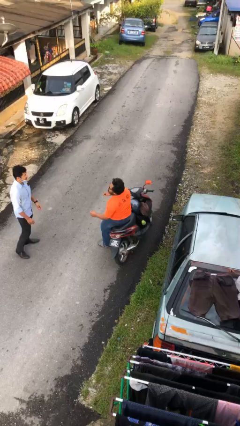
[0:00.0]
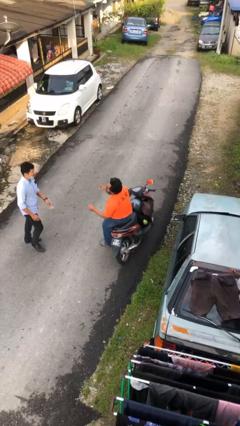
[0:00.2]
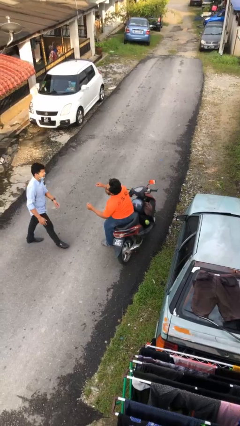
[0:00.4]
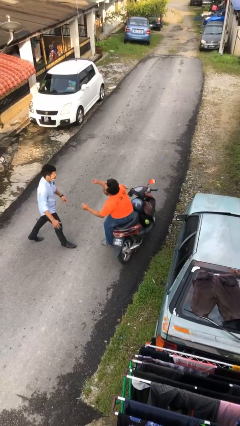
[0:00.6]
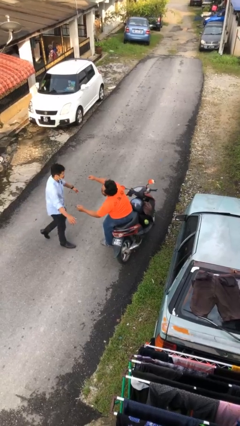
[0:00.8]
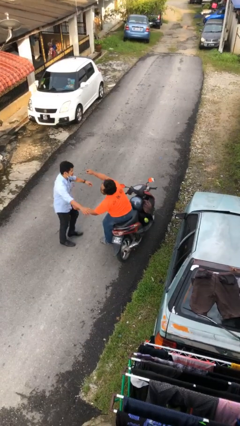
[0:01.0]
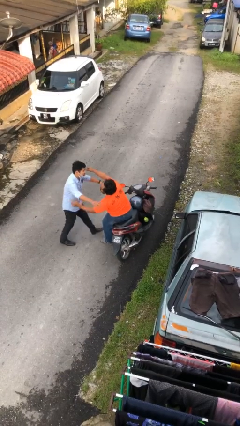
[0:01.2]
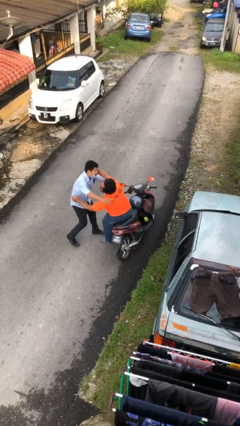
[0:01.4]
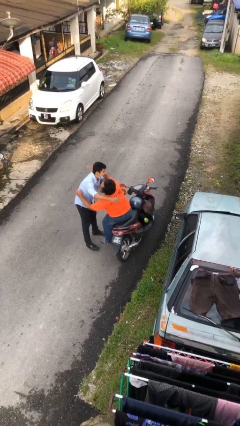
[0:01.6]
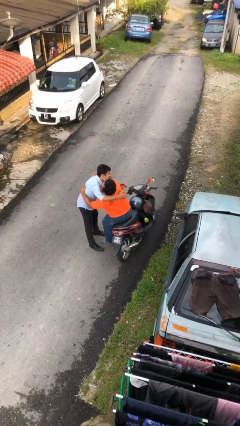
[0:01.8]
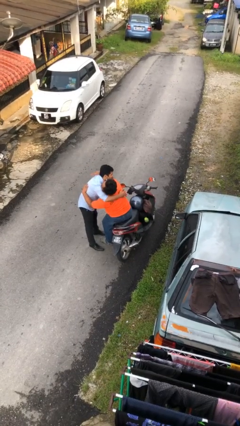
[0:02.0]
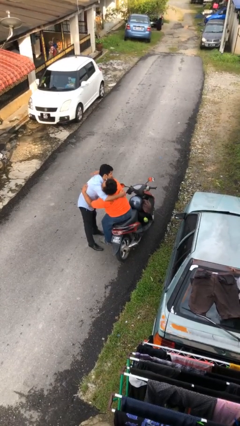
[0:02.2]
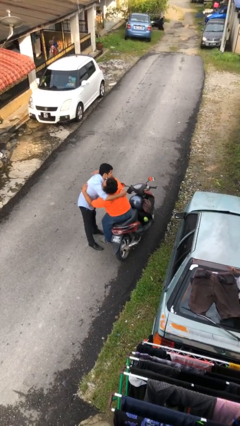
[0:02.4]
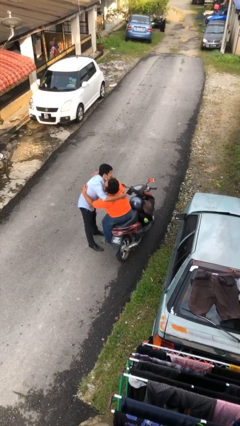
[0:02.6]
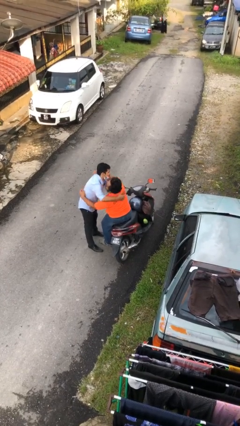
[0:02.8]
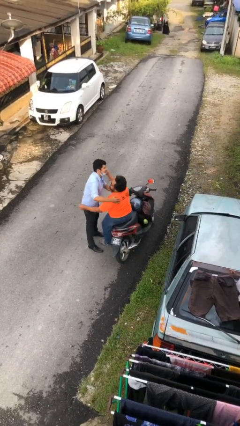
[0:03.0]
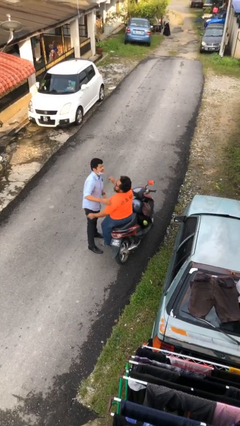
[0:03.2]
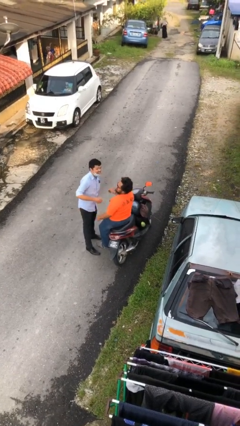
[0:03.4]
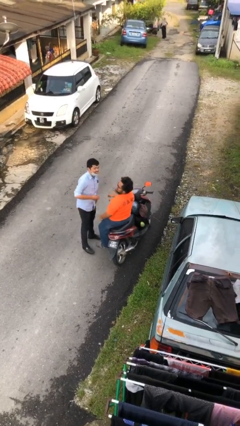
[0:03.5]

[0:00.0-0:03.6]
person embraces person

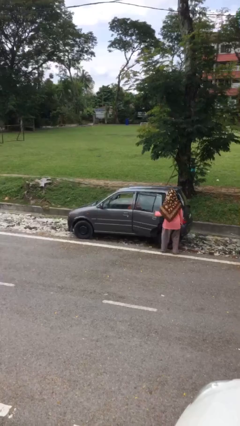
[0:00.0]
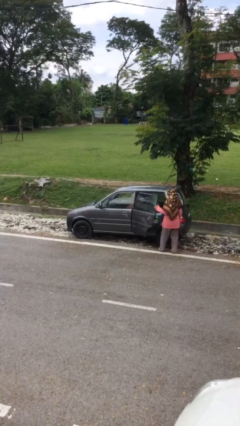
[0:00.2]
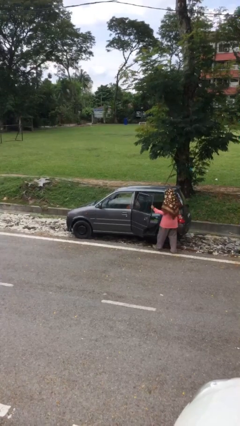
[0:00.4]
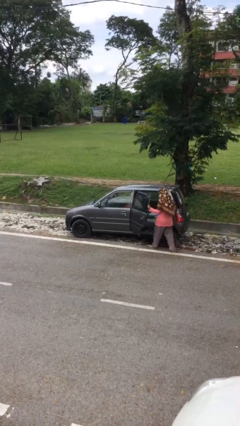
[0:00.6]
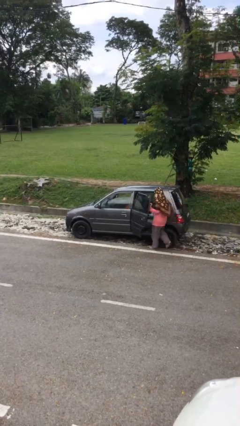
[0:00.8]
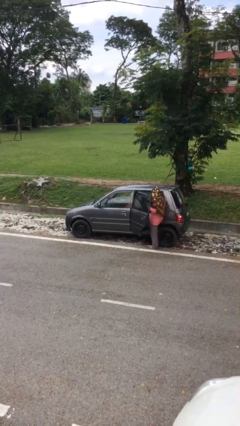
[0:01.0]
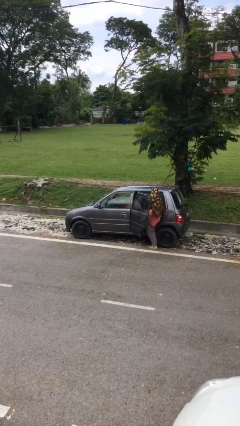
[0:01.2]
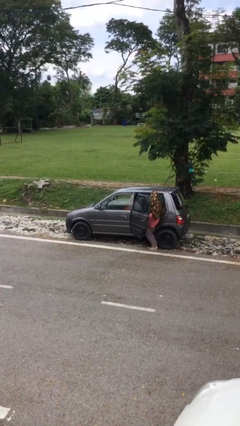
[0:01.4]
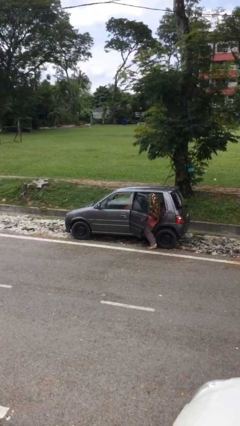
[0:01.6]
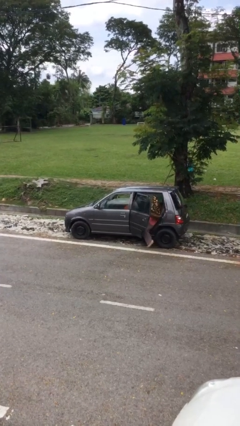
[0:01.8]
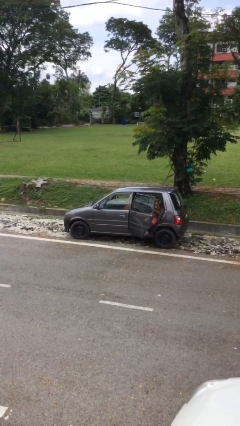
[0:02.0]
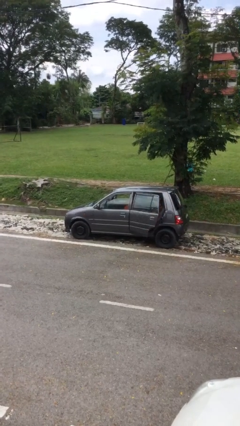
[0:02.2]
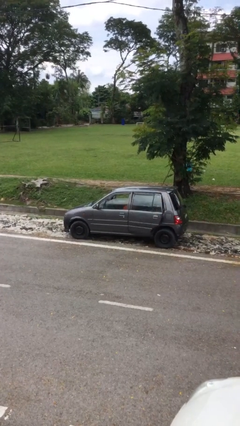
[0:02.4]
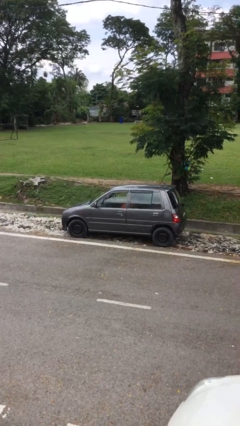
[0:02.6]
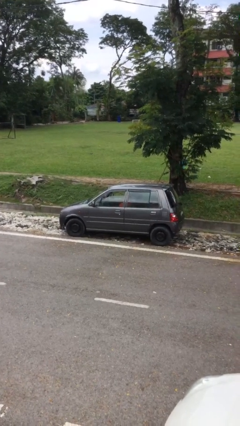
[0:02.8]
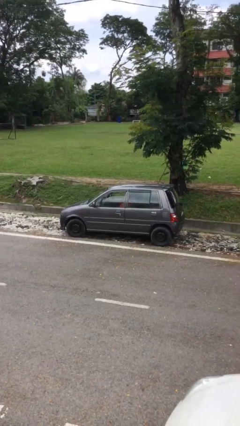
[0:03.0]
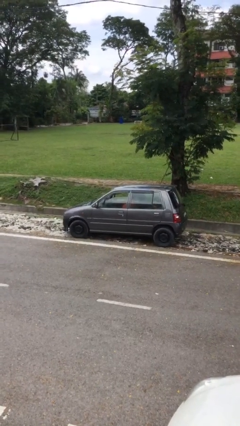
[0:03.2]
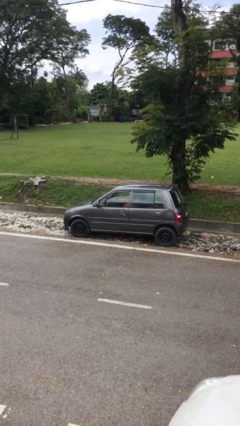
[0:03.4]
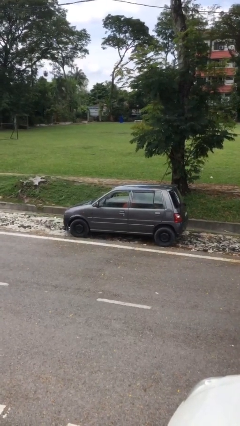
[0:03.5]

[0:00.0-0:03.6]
car picks up person

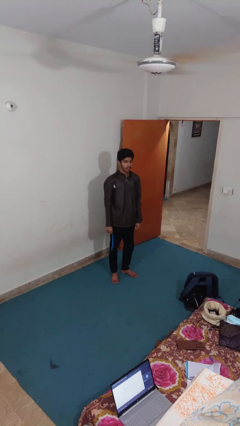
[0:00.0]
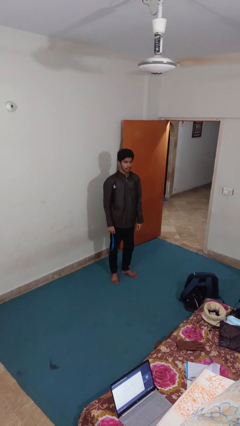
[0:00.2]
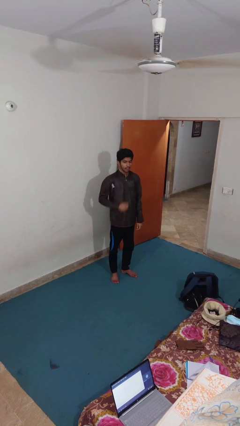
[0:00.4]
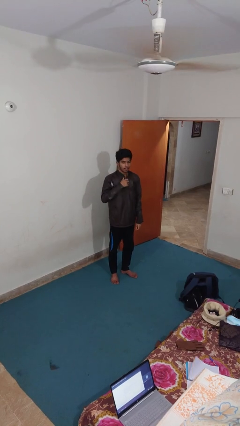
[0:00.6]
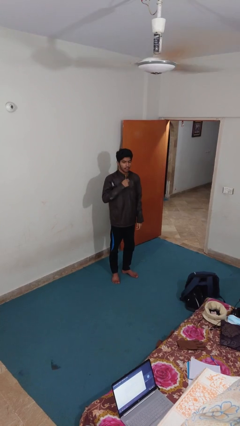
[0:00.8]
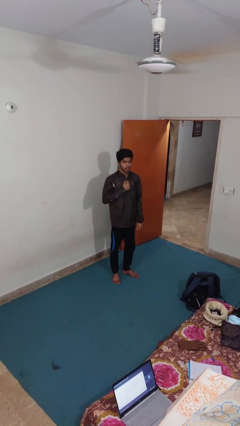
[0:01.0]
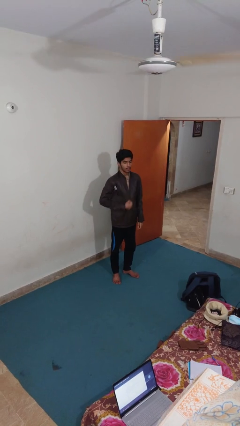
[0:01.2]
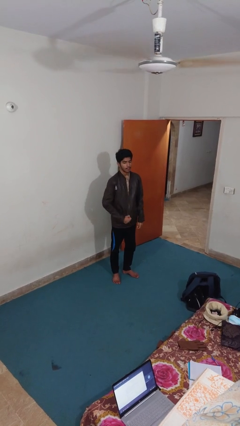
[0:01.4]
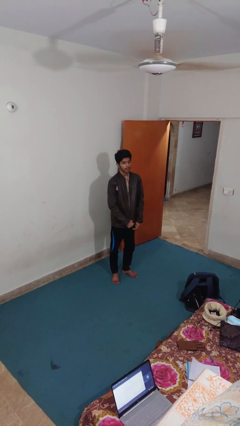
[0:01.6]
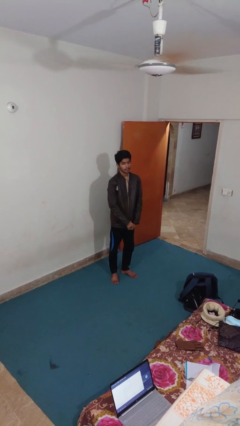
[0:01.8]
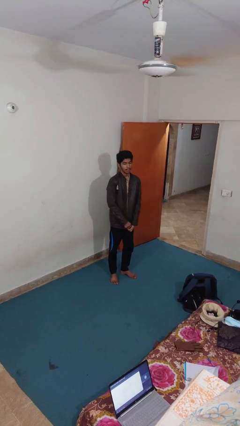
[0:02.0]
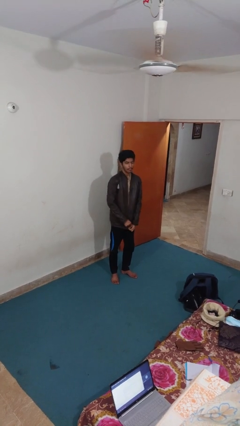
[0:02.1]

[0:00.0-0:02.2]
person unzips jacket

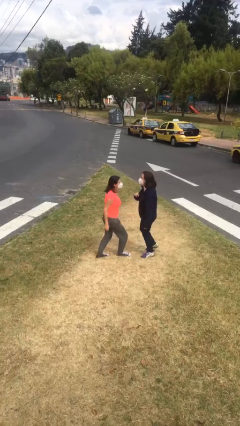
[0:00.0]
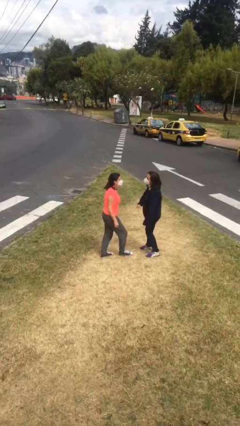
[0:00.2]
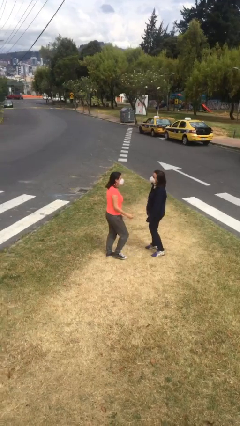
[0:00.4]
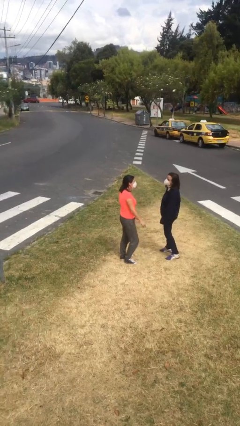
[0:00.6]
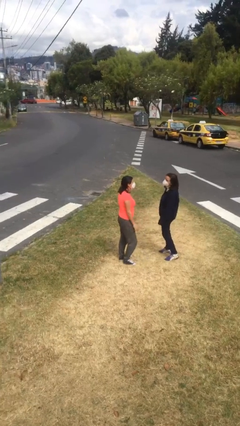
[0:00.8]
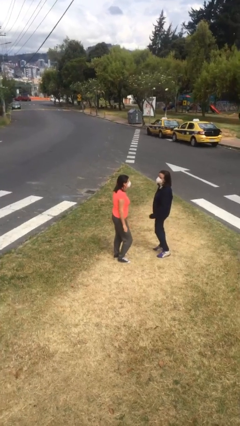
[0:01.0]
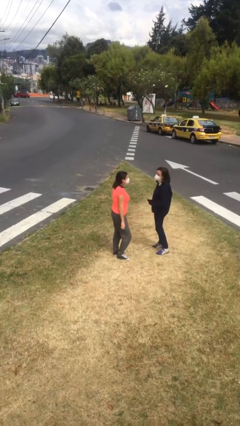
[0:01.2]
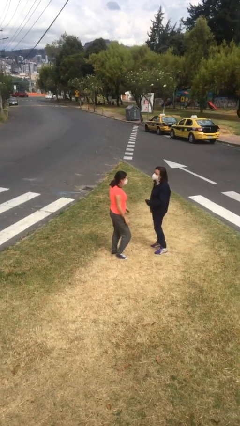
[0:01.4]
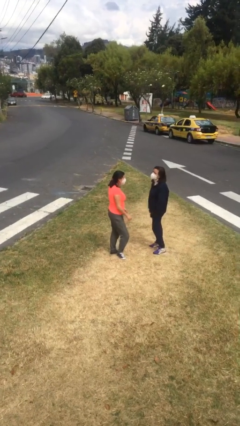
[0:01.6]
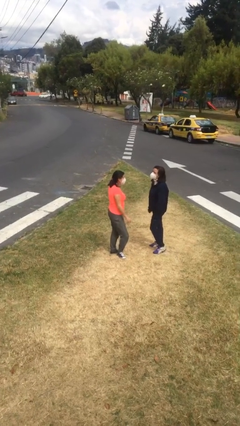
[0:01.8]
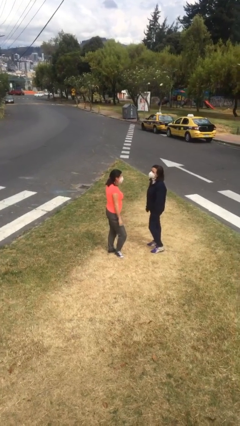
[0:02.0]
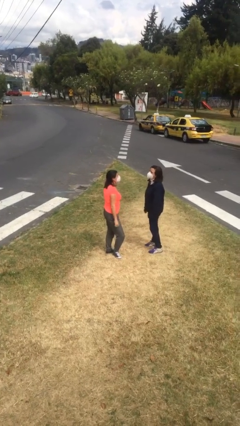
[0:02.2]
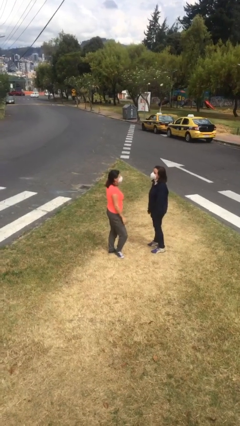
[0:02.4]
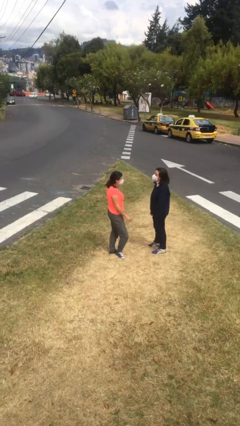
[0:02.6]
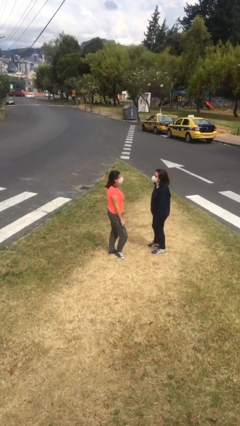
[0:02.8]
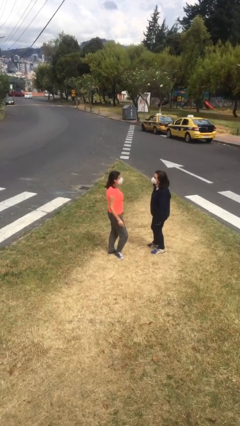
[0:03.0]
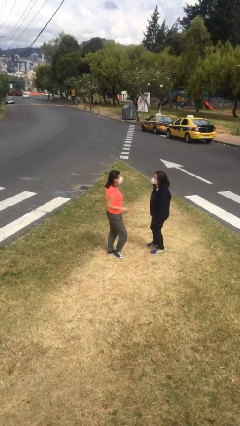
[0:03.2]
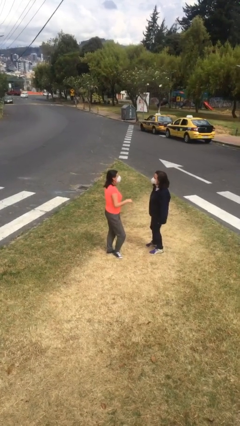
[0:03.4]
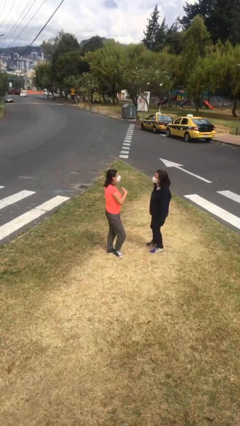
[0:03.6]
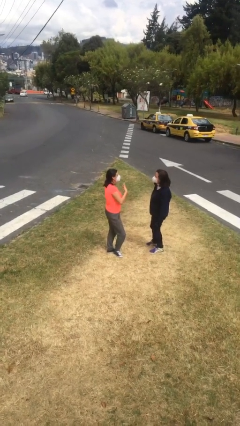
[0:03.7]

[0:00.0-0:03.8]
person talks to person

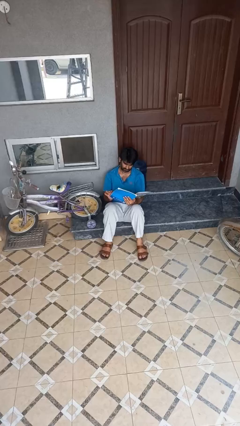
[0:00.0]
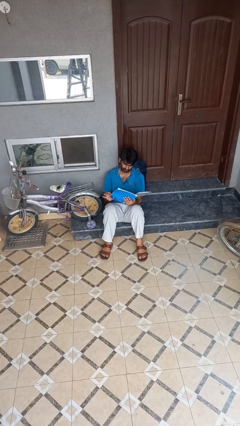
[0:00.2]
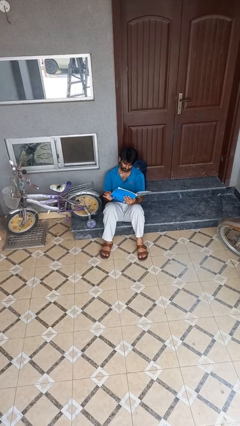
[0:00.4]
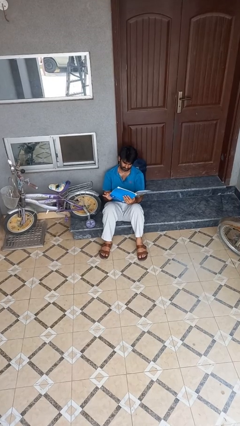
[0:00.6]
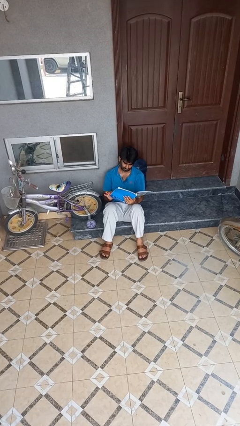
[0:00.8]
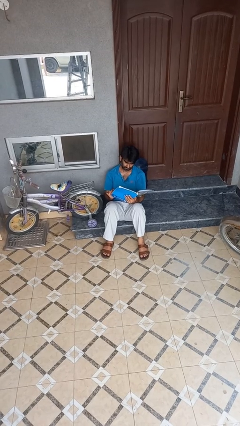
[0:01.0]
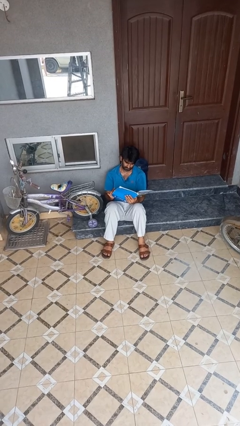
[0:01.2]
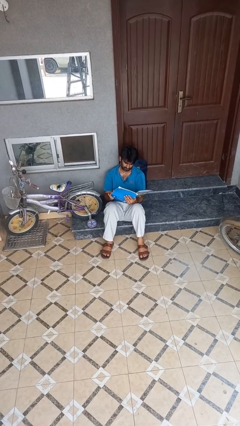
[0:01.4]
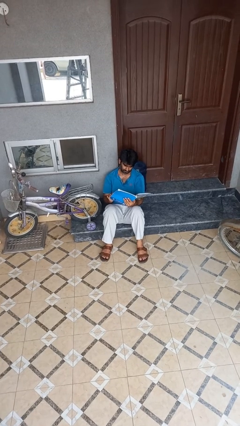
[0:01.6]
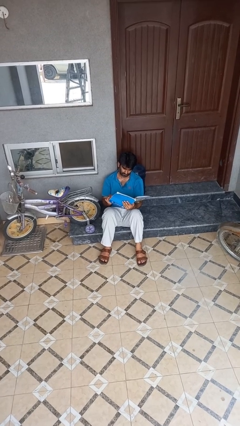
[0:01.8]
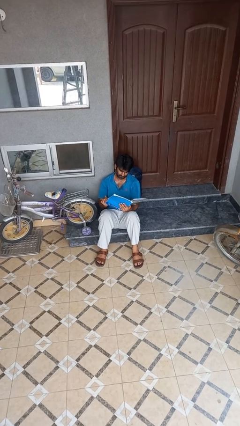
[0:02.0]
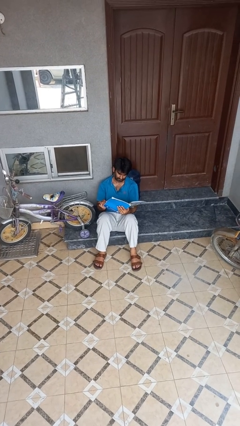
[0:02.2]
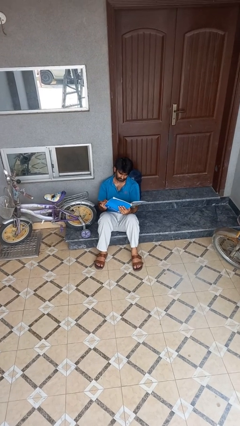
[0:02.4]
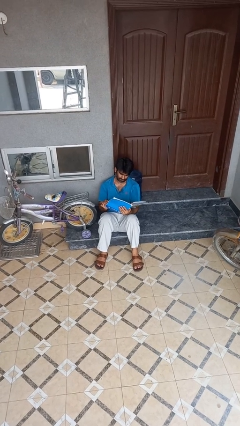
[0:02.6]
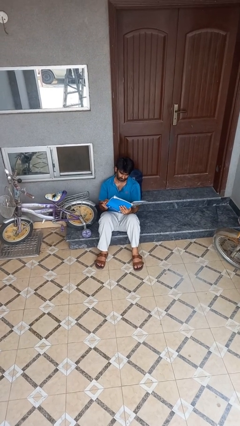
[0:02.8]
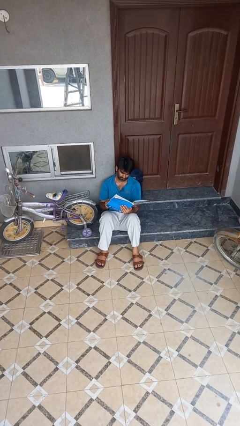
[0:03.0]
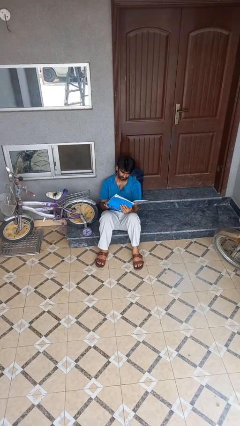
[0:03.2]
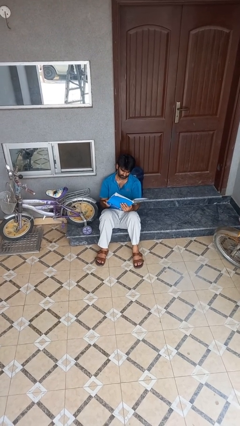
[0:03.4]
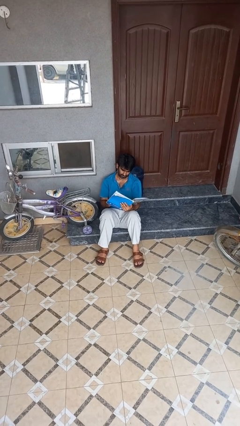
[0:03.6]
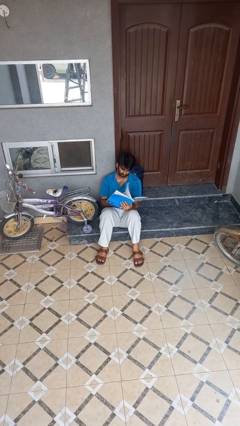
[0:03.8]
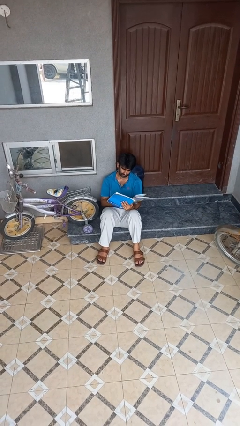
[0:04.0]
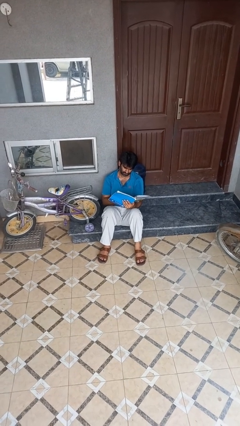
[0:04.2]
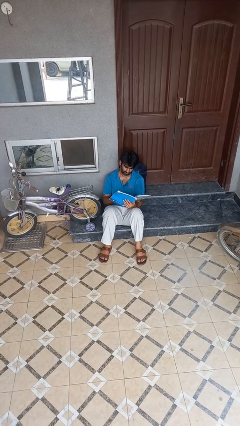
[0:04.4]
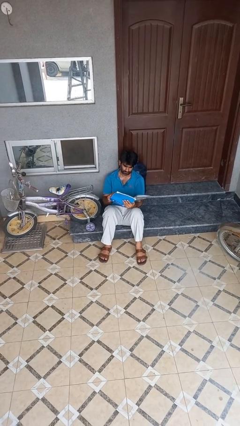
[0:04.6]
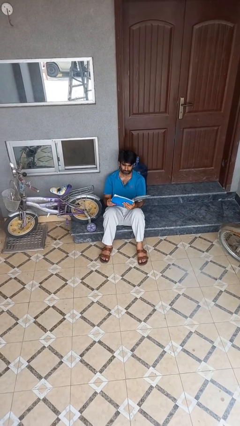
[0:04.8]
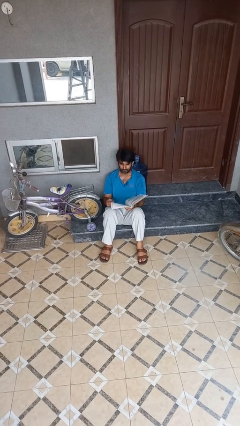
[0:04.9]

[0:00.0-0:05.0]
person reads book
